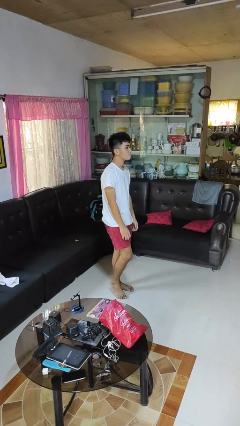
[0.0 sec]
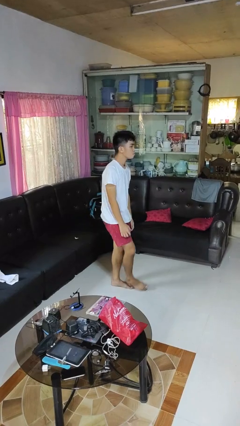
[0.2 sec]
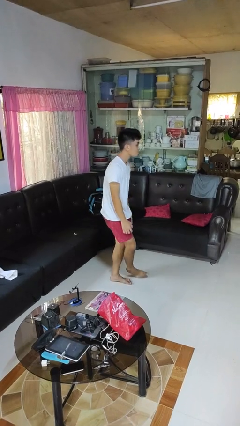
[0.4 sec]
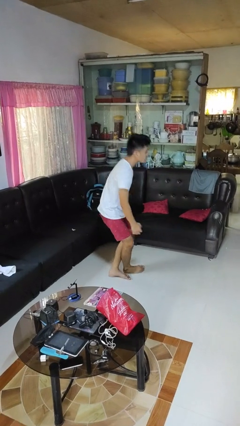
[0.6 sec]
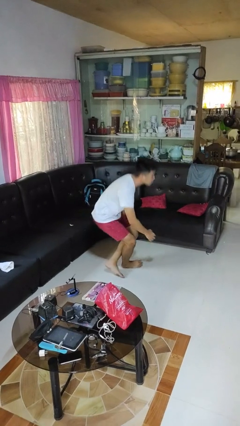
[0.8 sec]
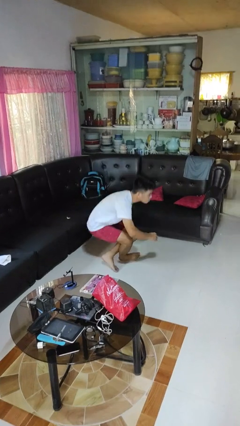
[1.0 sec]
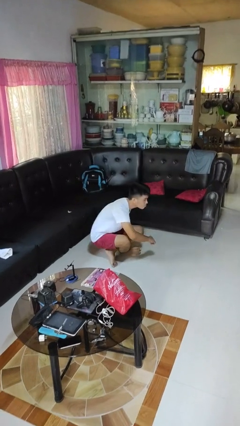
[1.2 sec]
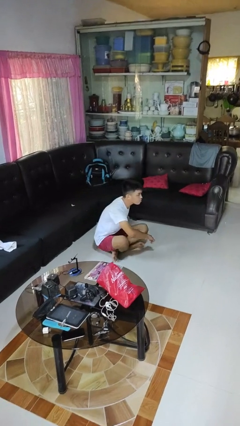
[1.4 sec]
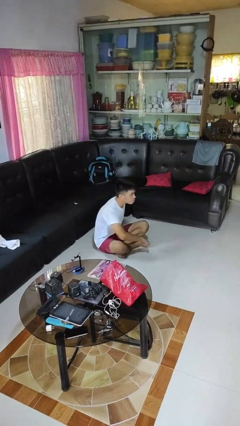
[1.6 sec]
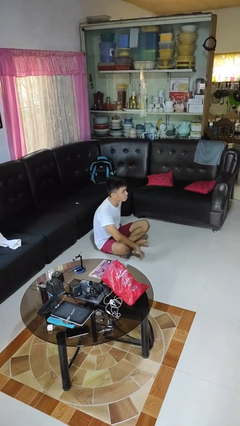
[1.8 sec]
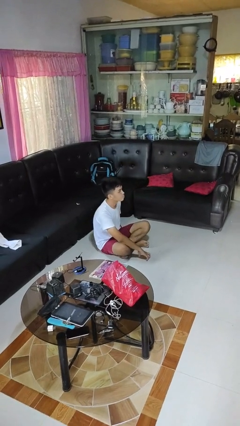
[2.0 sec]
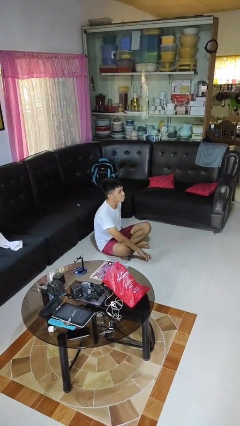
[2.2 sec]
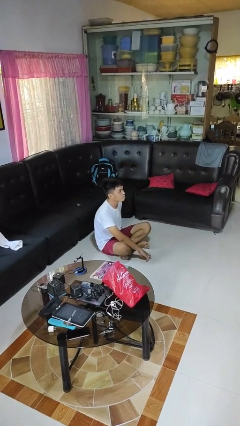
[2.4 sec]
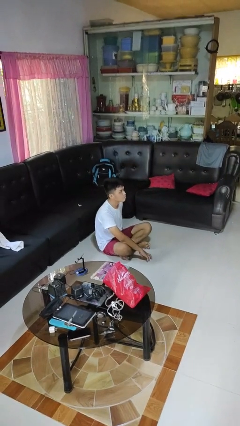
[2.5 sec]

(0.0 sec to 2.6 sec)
person sits crisscross

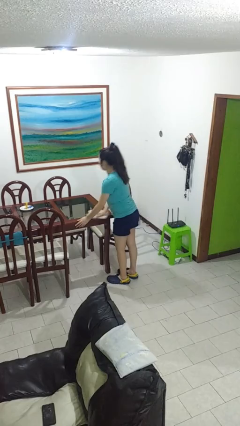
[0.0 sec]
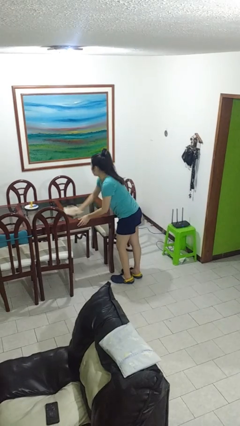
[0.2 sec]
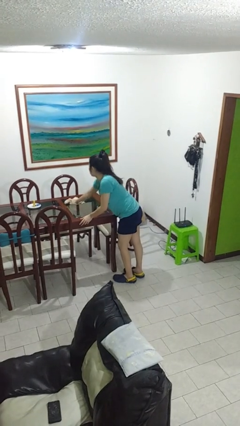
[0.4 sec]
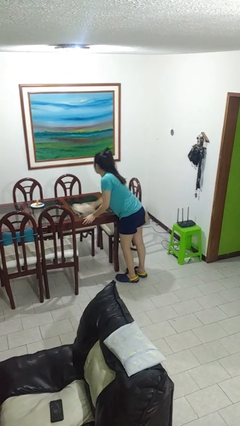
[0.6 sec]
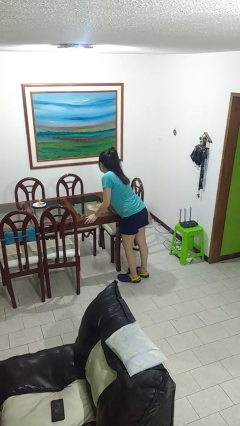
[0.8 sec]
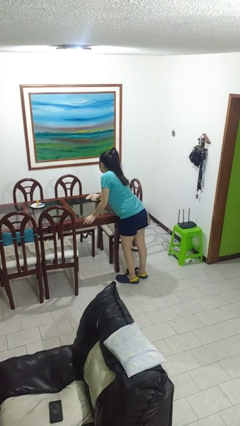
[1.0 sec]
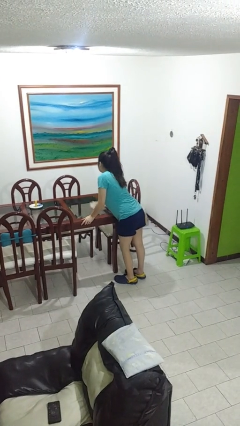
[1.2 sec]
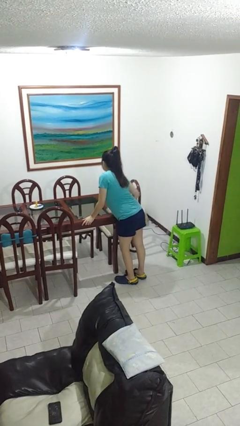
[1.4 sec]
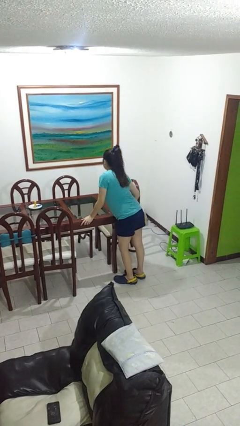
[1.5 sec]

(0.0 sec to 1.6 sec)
person cleans table with rag

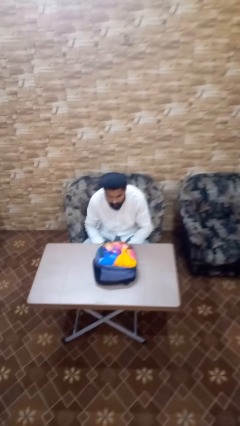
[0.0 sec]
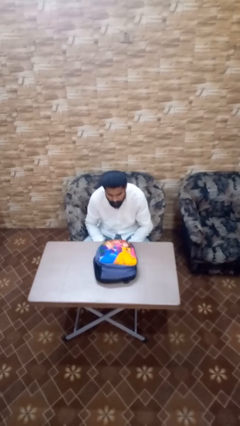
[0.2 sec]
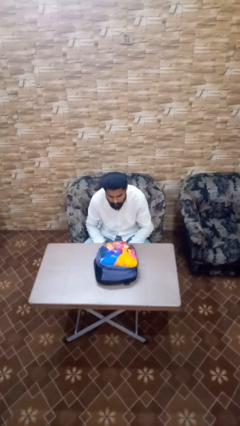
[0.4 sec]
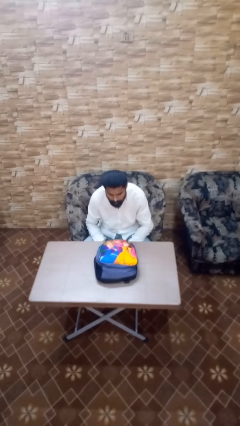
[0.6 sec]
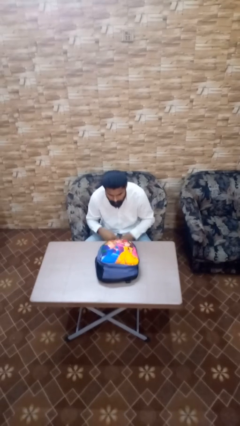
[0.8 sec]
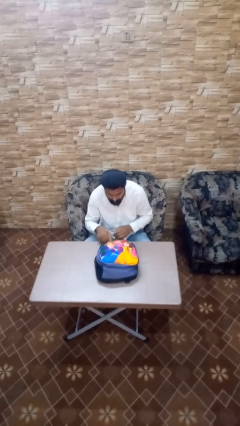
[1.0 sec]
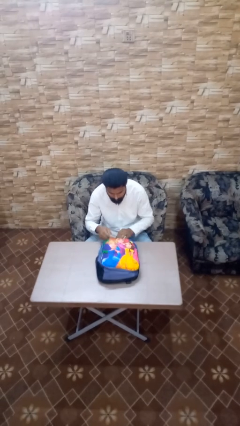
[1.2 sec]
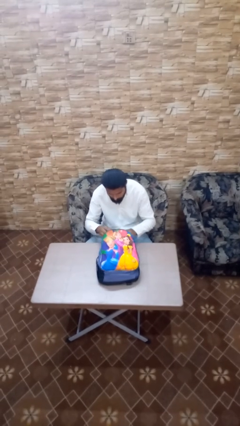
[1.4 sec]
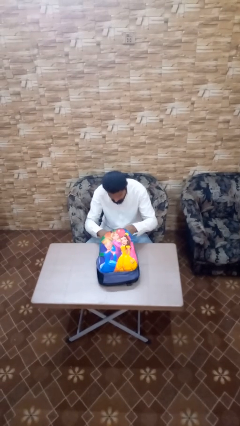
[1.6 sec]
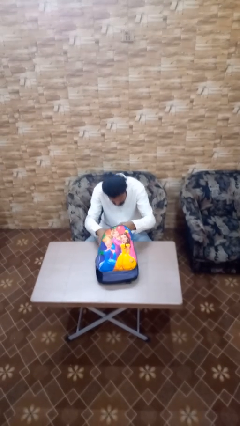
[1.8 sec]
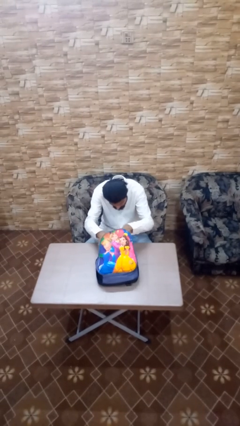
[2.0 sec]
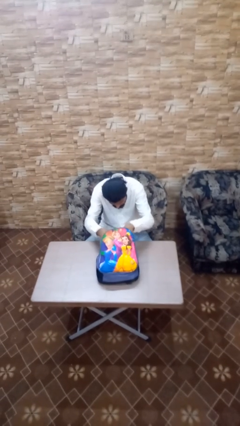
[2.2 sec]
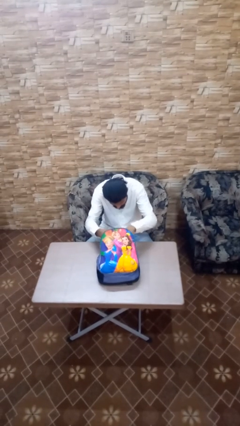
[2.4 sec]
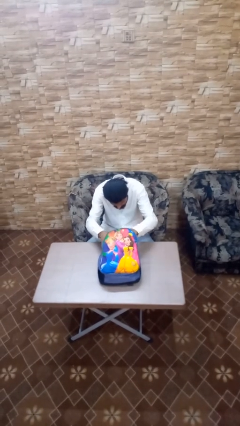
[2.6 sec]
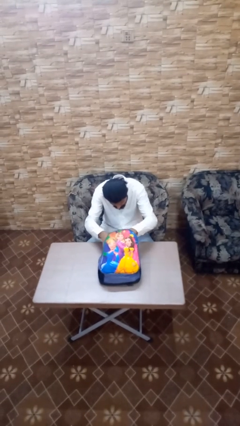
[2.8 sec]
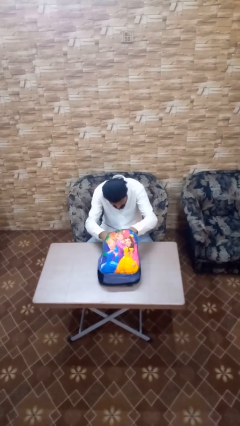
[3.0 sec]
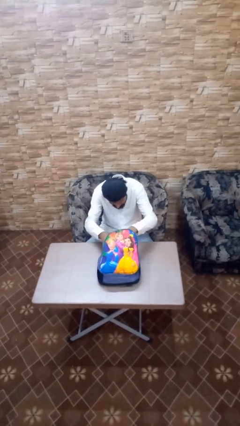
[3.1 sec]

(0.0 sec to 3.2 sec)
person searches in backpack

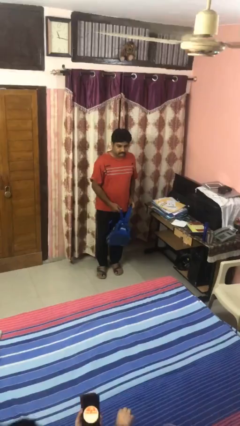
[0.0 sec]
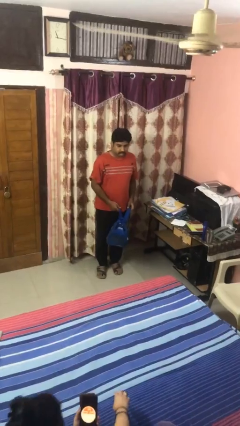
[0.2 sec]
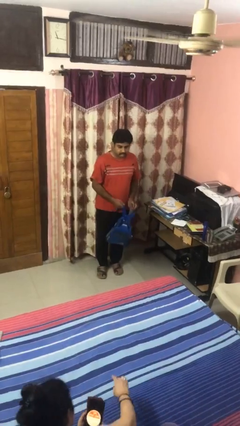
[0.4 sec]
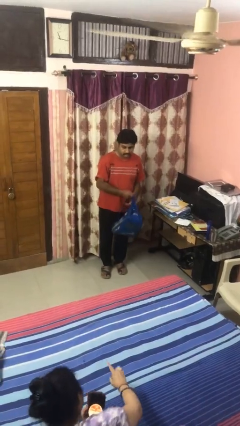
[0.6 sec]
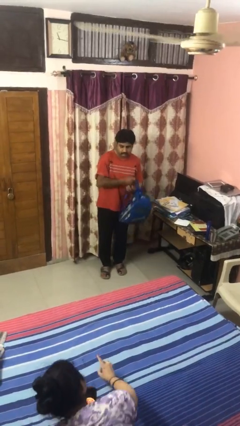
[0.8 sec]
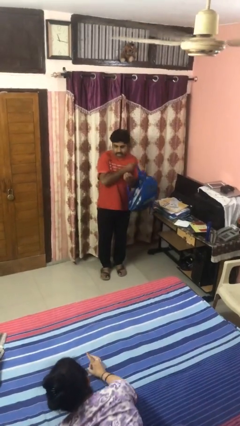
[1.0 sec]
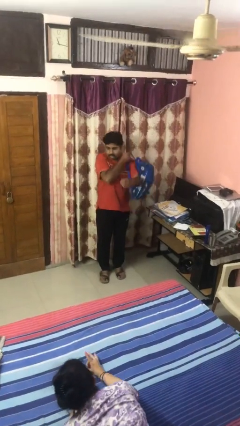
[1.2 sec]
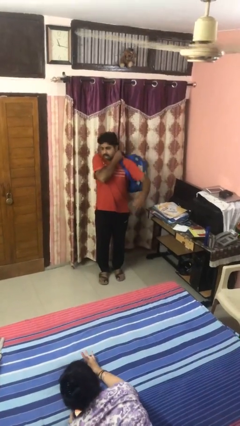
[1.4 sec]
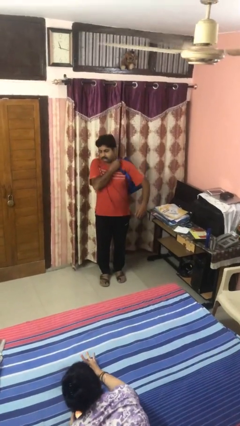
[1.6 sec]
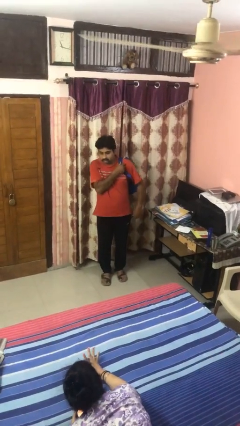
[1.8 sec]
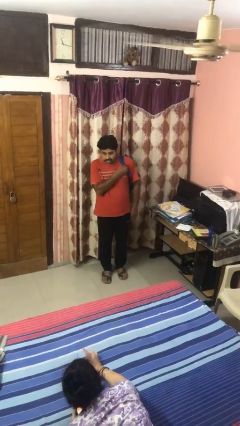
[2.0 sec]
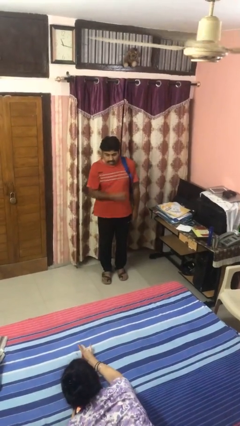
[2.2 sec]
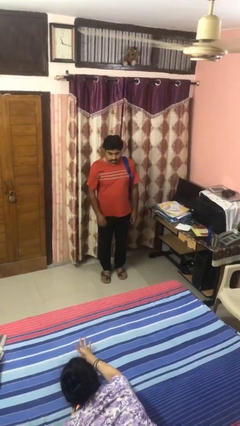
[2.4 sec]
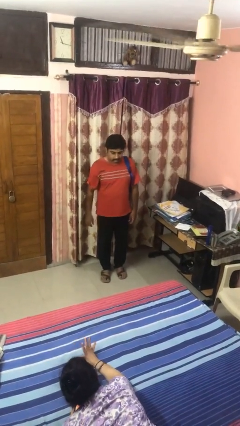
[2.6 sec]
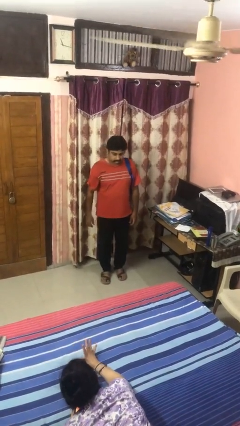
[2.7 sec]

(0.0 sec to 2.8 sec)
person puts on backpack

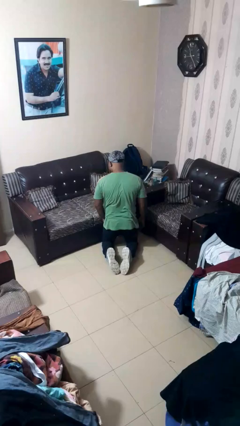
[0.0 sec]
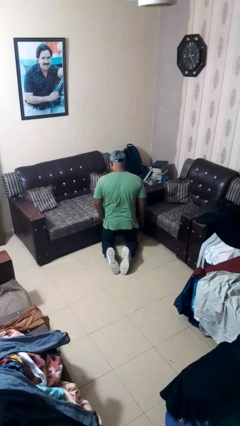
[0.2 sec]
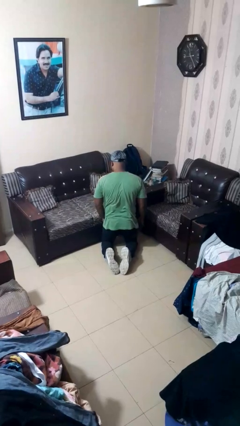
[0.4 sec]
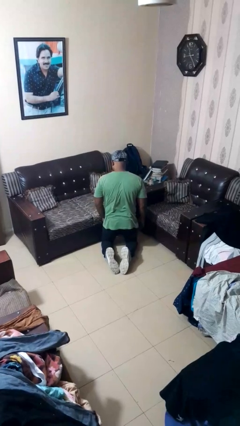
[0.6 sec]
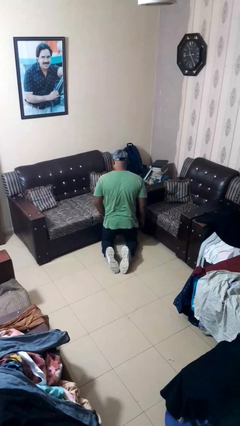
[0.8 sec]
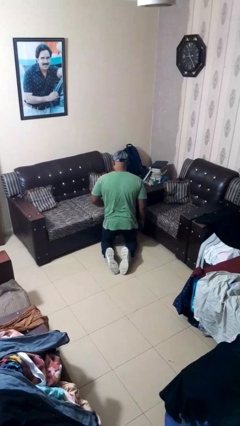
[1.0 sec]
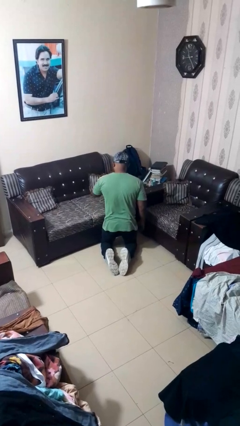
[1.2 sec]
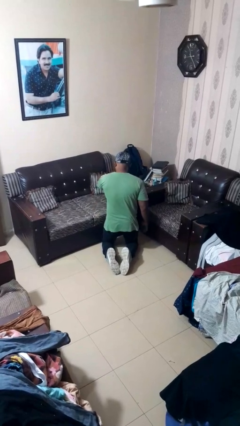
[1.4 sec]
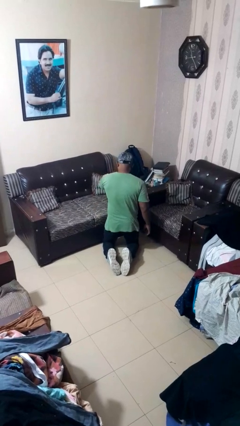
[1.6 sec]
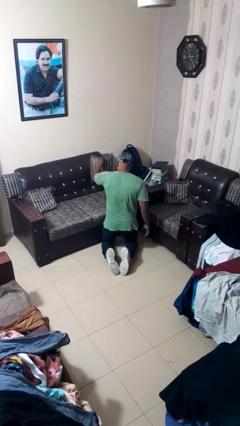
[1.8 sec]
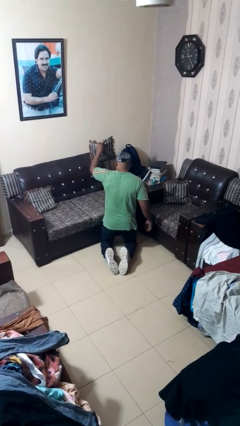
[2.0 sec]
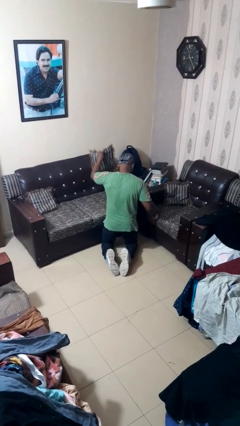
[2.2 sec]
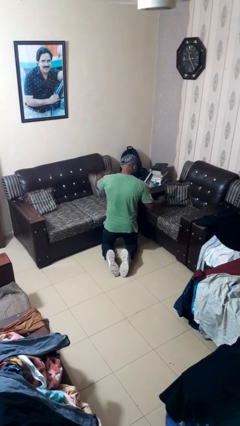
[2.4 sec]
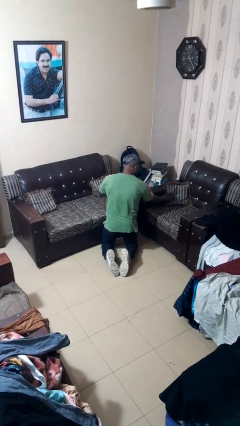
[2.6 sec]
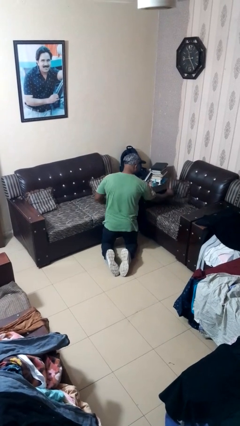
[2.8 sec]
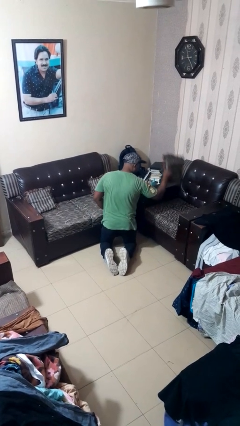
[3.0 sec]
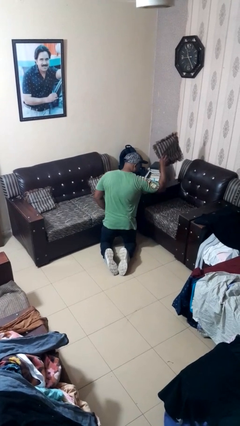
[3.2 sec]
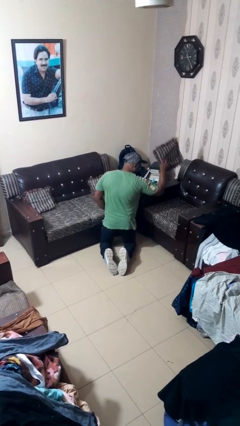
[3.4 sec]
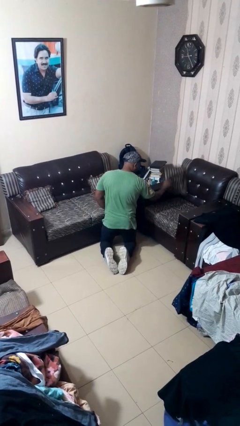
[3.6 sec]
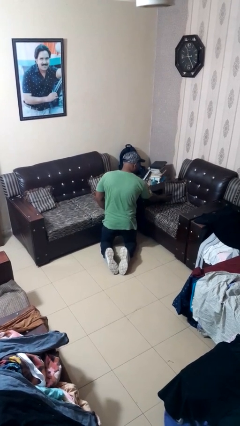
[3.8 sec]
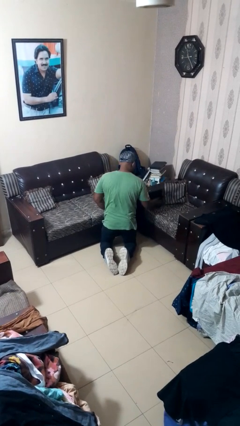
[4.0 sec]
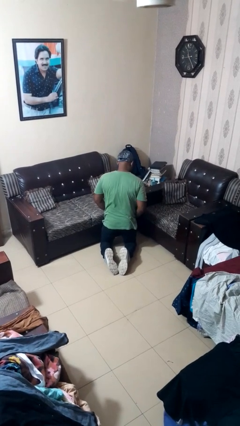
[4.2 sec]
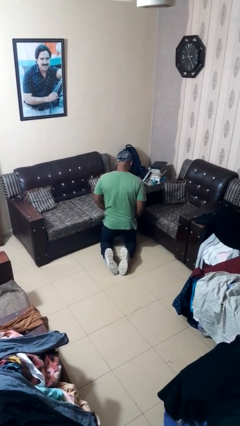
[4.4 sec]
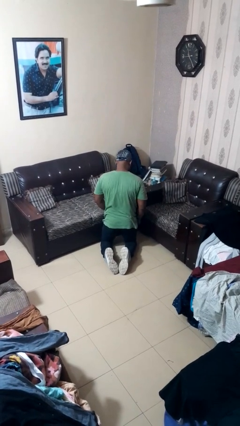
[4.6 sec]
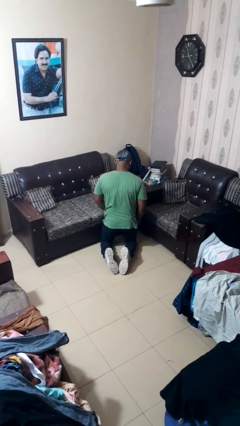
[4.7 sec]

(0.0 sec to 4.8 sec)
person searches in couch

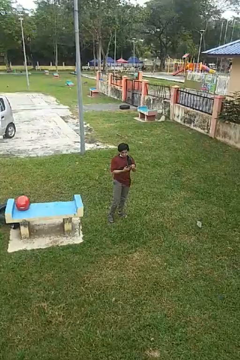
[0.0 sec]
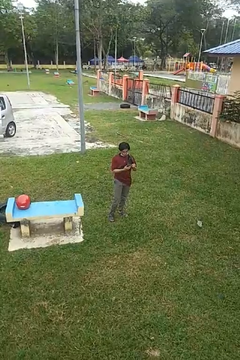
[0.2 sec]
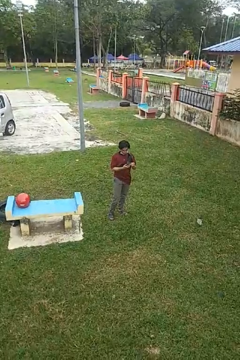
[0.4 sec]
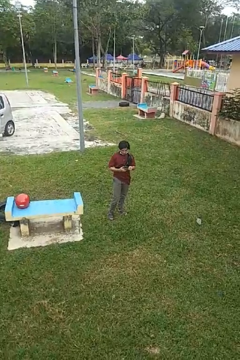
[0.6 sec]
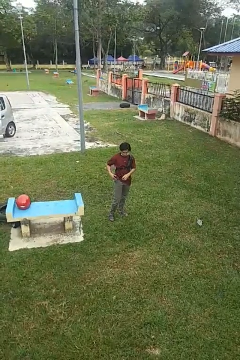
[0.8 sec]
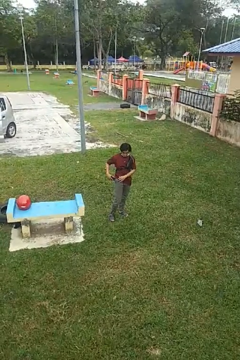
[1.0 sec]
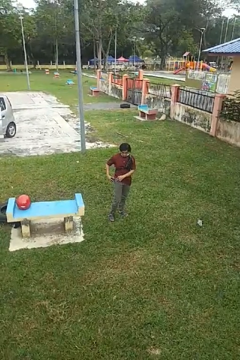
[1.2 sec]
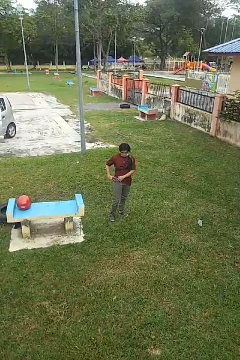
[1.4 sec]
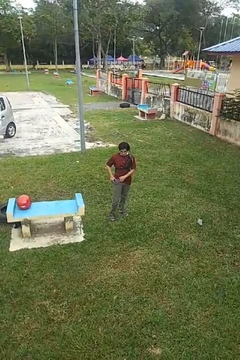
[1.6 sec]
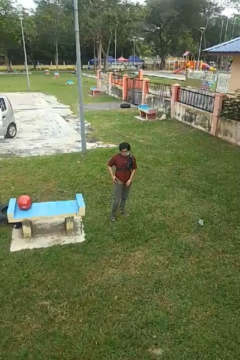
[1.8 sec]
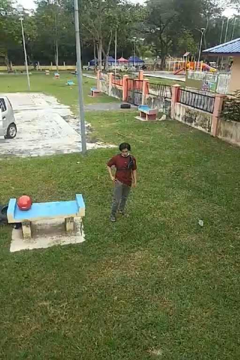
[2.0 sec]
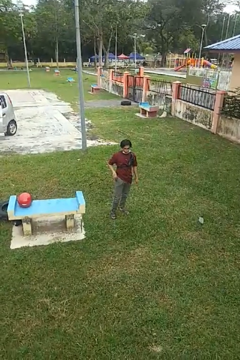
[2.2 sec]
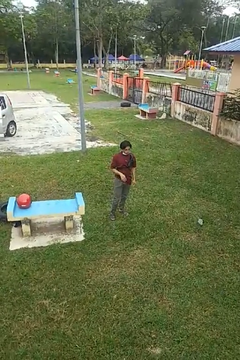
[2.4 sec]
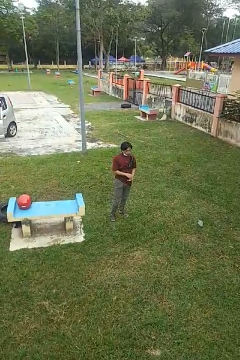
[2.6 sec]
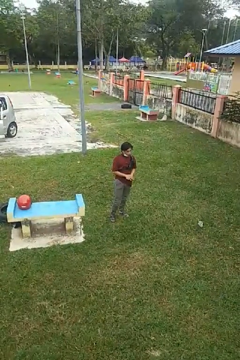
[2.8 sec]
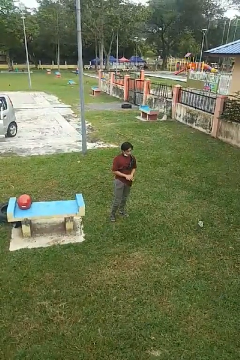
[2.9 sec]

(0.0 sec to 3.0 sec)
person puts phone into pocket
